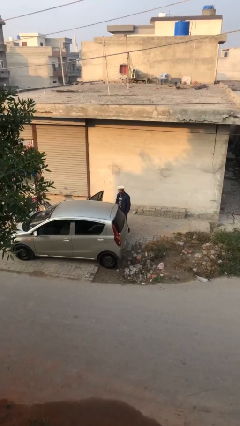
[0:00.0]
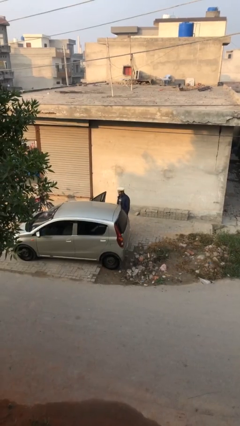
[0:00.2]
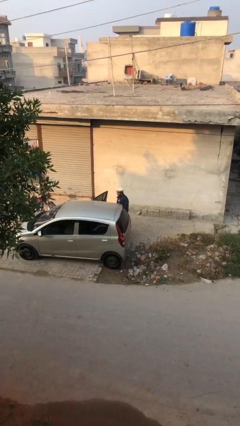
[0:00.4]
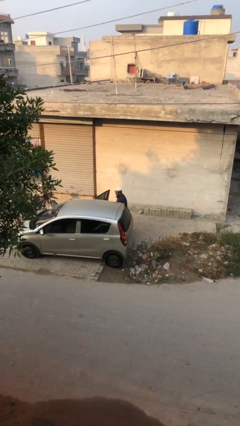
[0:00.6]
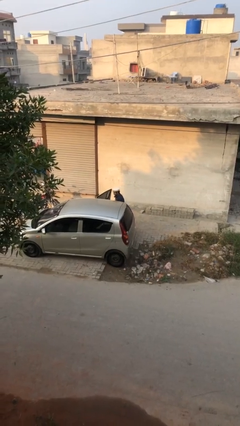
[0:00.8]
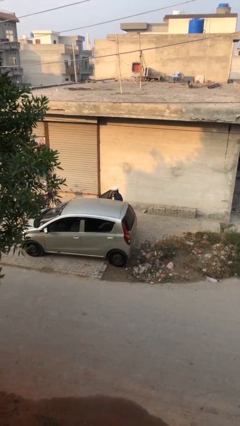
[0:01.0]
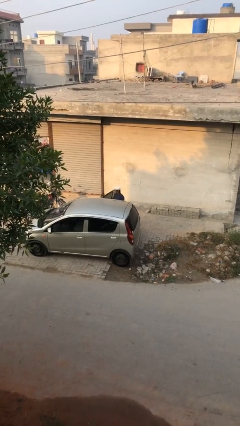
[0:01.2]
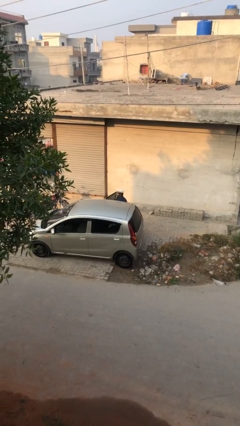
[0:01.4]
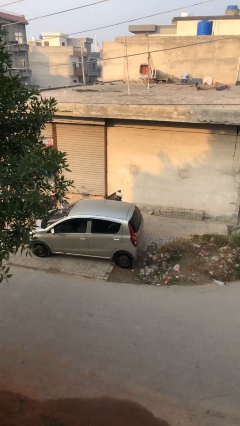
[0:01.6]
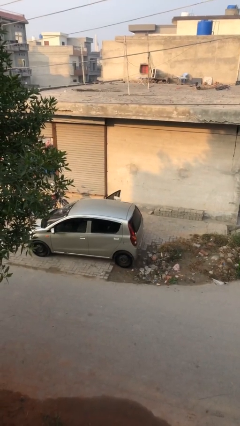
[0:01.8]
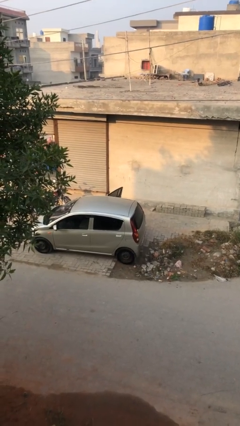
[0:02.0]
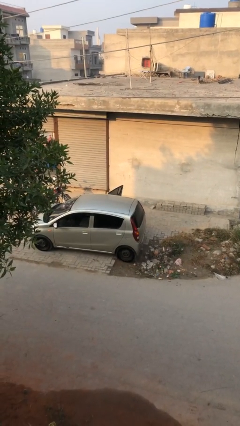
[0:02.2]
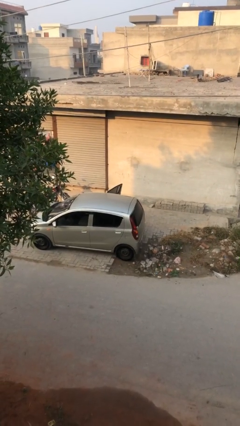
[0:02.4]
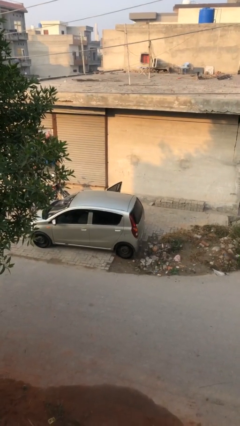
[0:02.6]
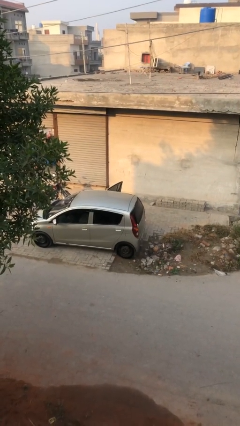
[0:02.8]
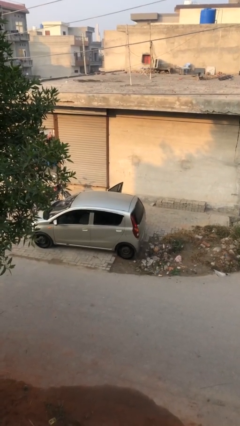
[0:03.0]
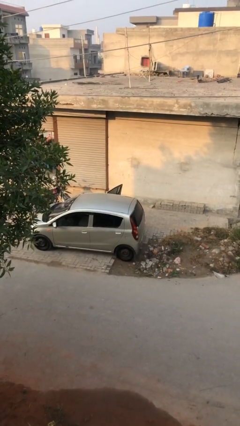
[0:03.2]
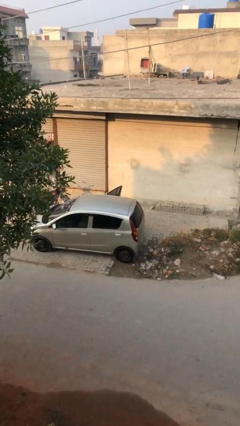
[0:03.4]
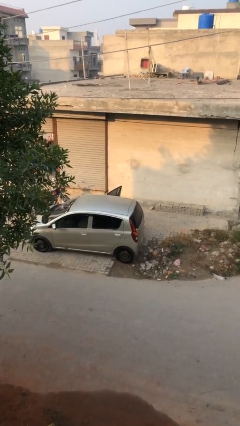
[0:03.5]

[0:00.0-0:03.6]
person enters car

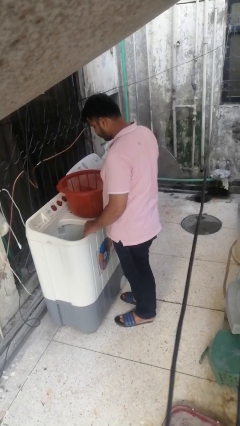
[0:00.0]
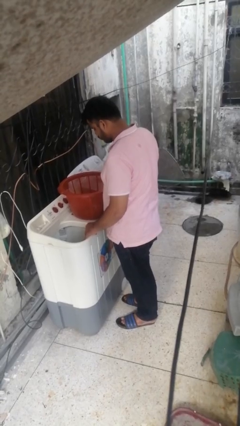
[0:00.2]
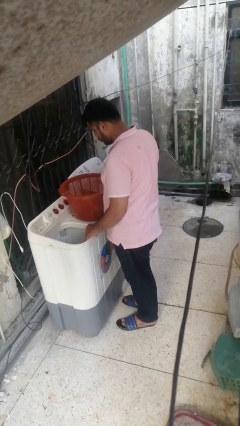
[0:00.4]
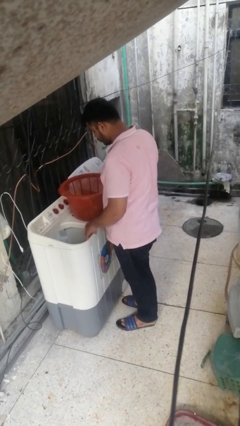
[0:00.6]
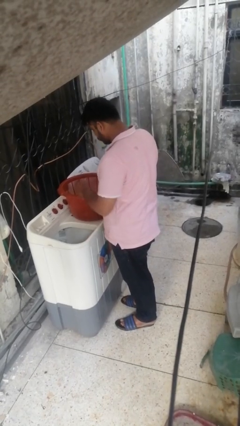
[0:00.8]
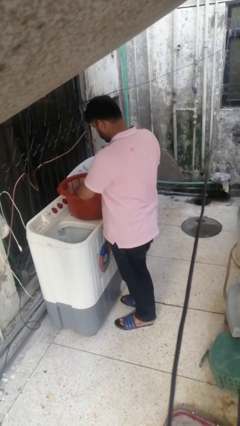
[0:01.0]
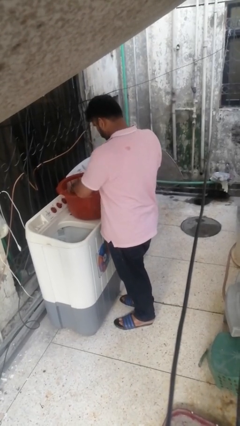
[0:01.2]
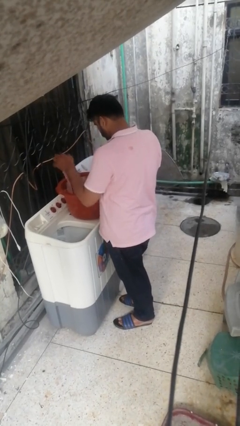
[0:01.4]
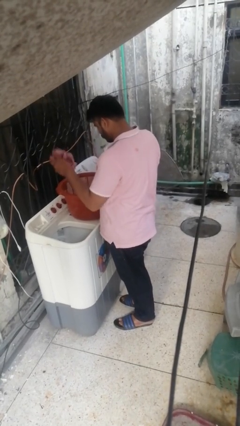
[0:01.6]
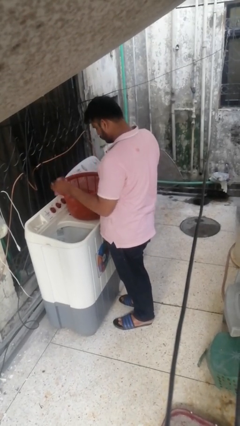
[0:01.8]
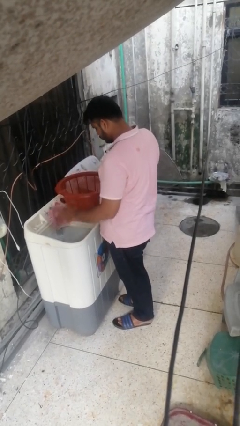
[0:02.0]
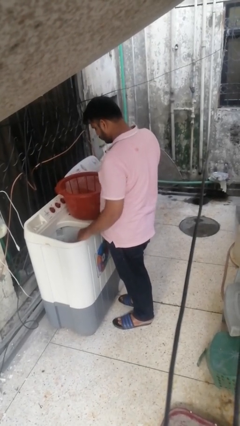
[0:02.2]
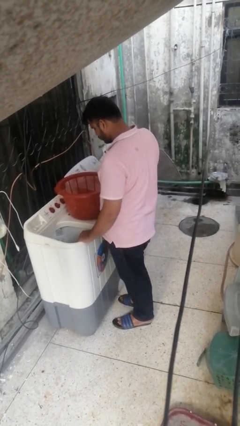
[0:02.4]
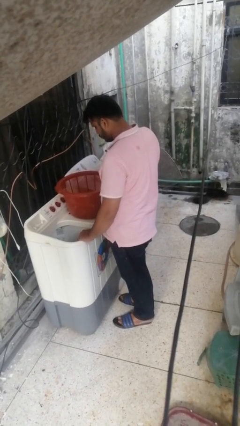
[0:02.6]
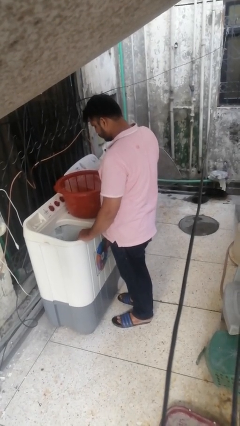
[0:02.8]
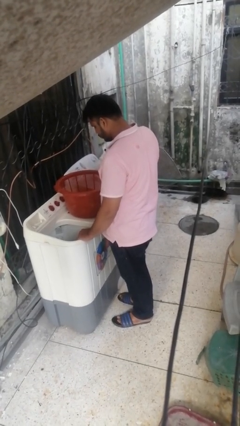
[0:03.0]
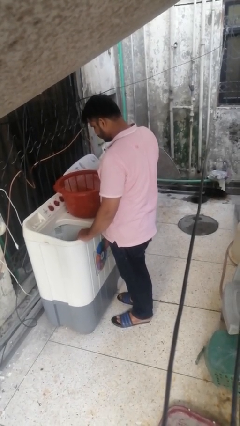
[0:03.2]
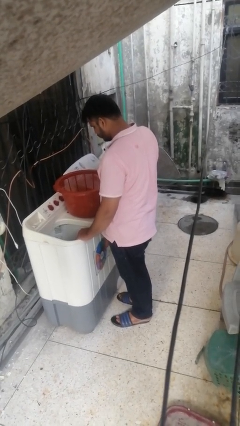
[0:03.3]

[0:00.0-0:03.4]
person loads clotheswasher

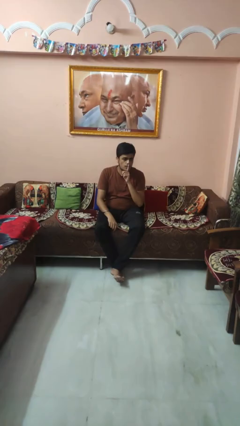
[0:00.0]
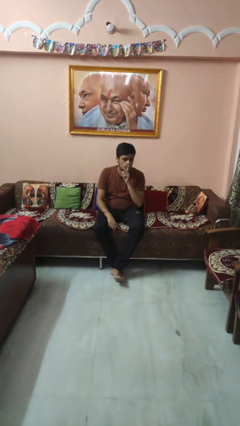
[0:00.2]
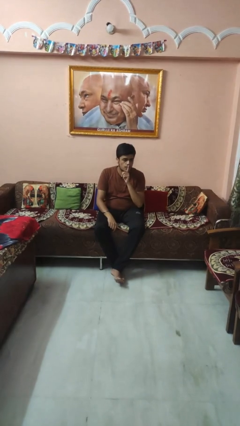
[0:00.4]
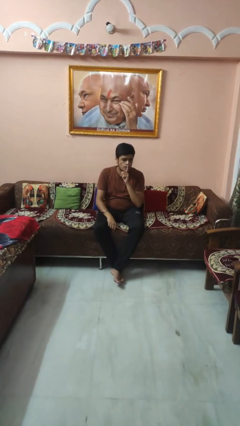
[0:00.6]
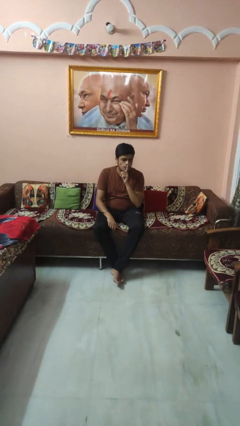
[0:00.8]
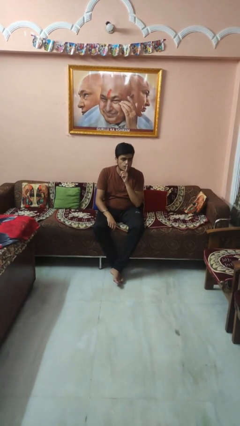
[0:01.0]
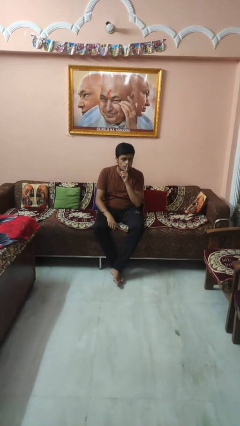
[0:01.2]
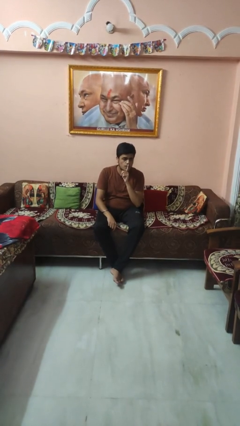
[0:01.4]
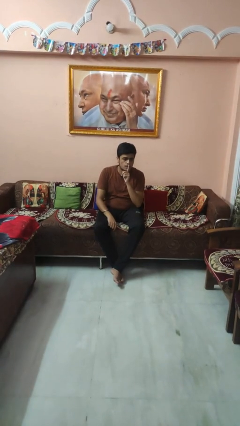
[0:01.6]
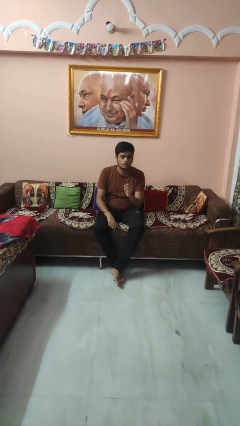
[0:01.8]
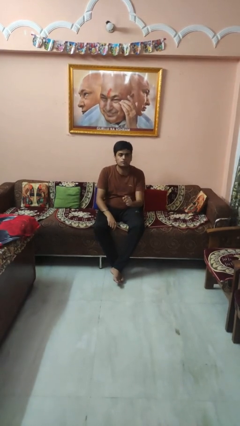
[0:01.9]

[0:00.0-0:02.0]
person gestures be quiet

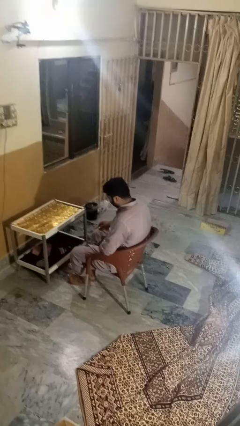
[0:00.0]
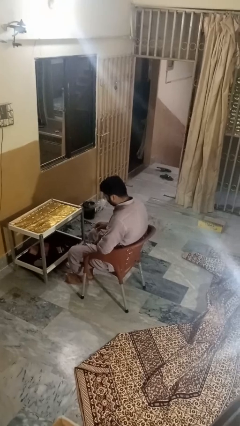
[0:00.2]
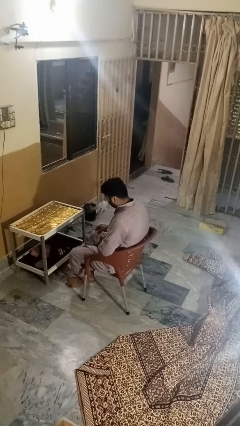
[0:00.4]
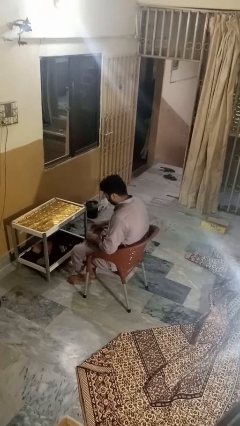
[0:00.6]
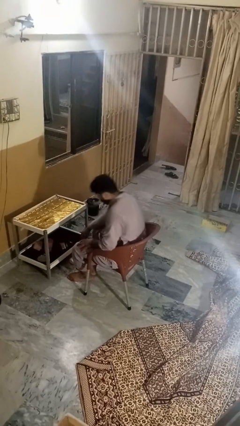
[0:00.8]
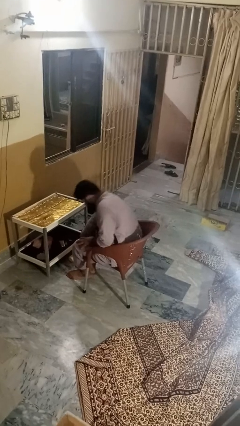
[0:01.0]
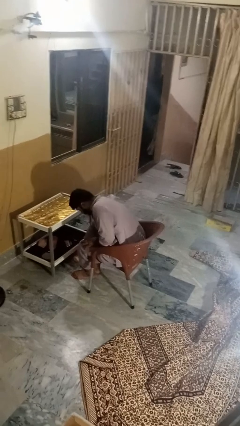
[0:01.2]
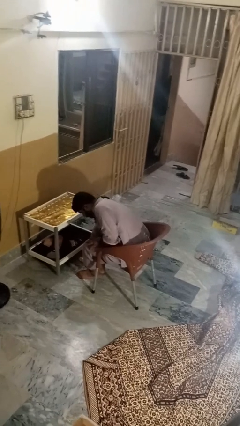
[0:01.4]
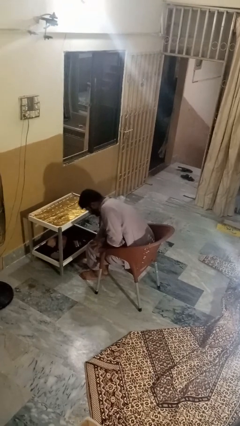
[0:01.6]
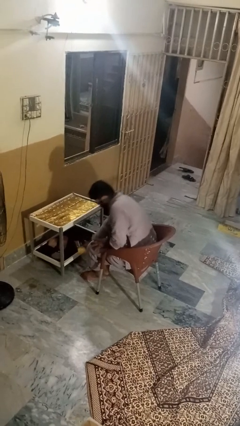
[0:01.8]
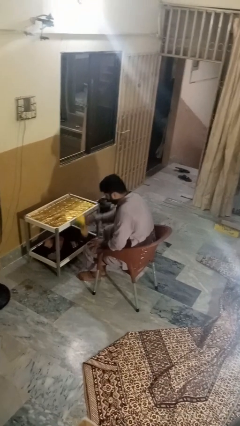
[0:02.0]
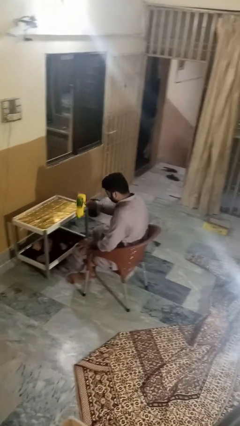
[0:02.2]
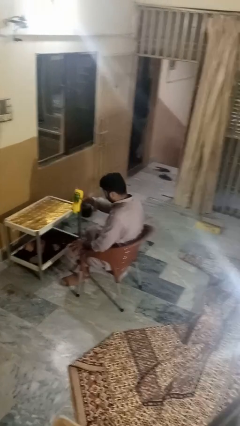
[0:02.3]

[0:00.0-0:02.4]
person picks up object from floor

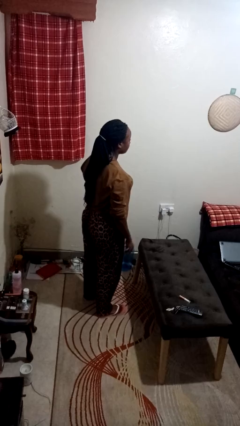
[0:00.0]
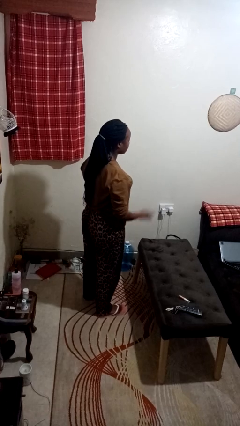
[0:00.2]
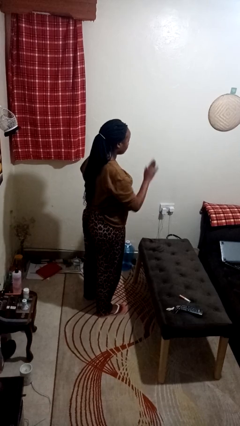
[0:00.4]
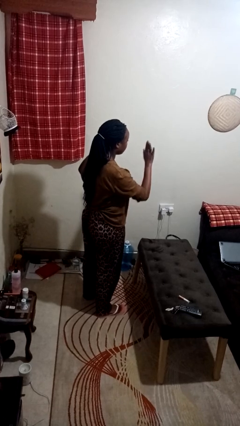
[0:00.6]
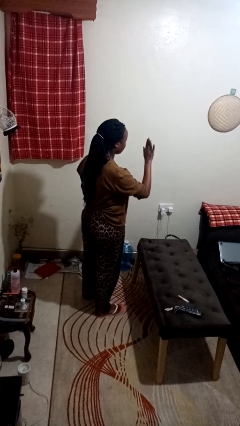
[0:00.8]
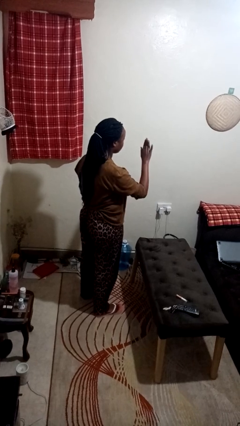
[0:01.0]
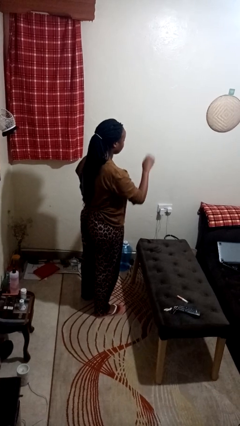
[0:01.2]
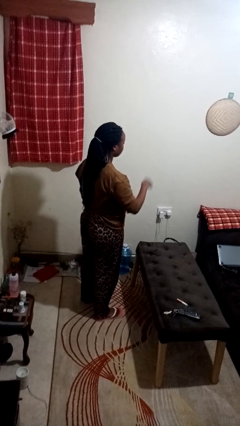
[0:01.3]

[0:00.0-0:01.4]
person gestures stop

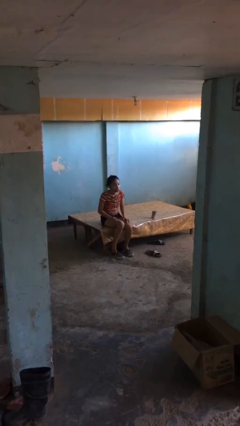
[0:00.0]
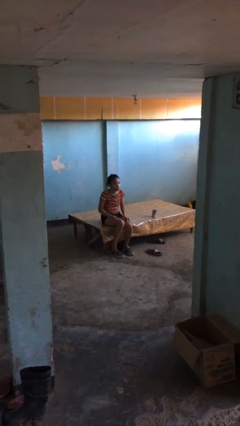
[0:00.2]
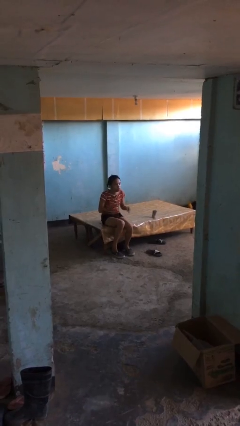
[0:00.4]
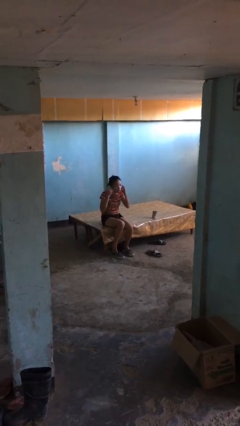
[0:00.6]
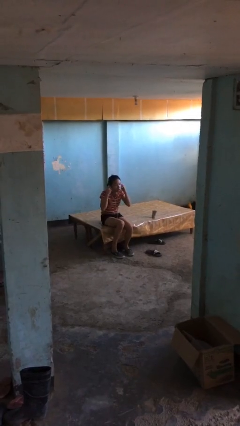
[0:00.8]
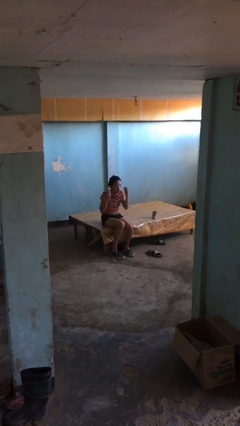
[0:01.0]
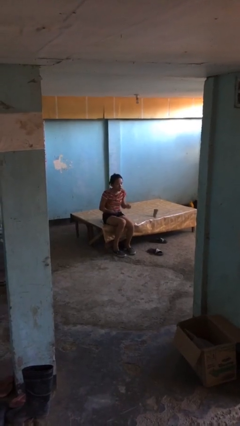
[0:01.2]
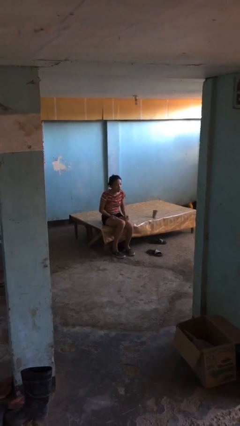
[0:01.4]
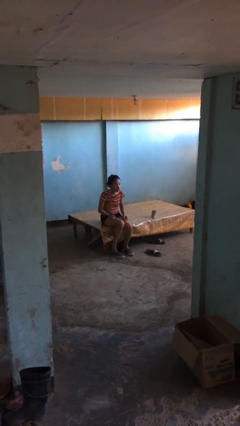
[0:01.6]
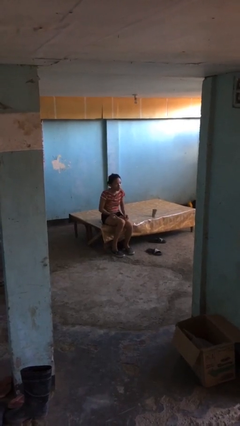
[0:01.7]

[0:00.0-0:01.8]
person takes off headphones

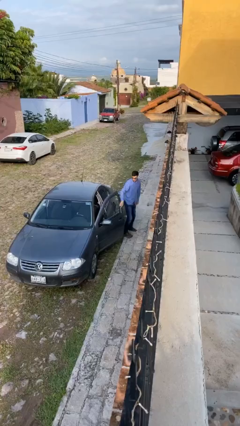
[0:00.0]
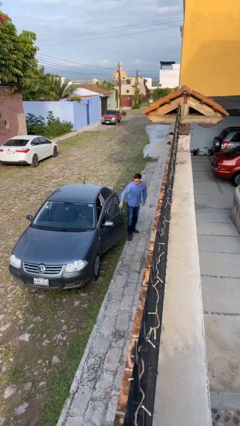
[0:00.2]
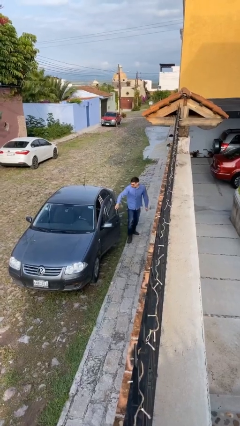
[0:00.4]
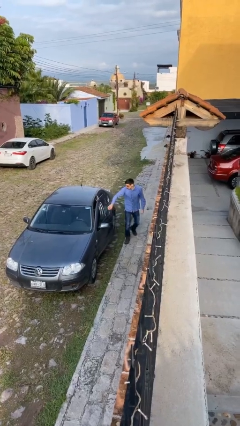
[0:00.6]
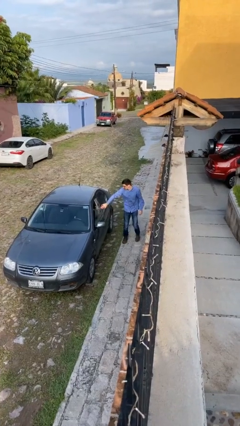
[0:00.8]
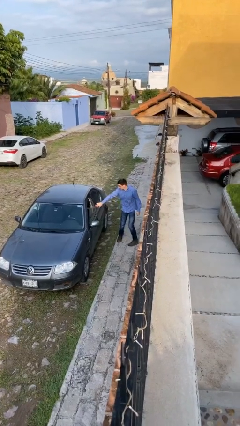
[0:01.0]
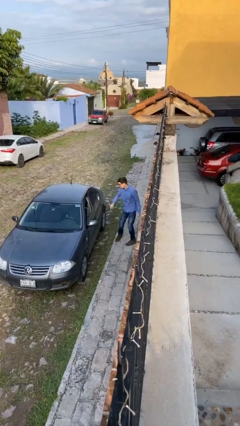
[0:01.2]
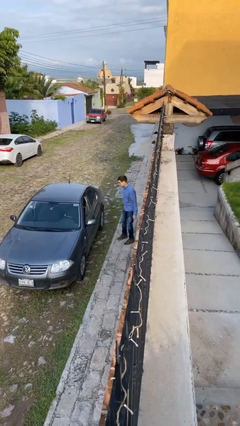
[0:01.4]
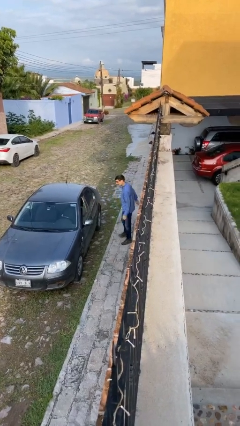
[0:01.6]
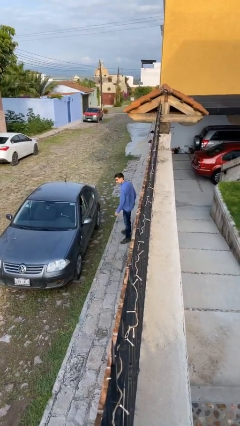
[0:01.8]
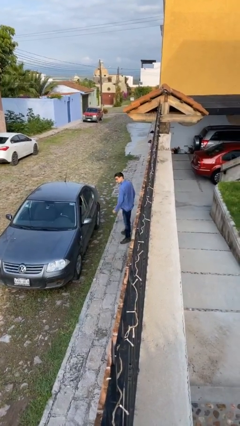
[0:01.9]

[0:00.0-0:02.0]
person closes car door

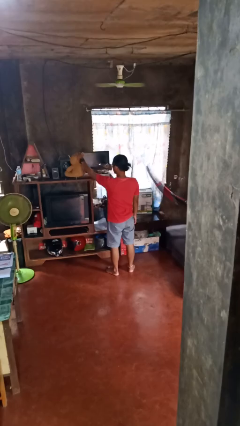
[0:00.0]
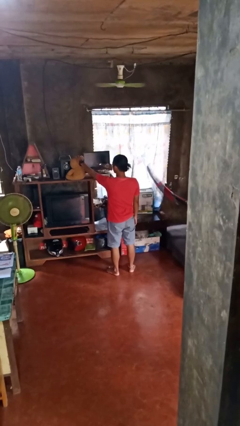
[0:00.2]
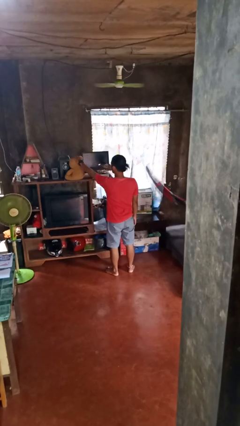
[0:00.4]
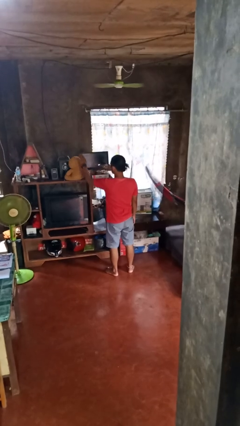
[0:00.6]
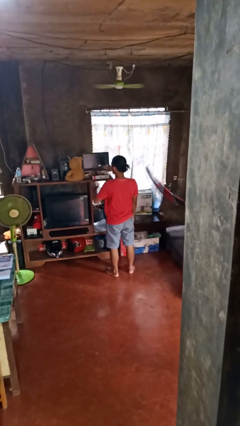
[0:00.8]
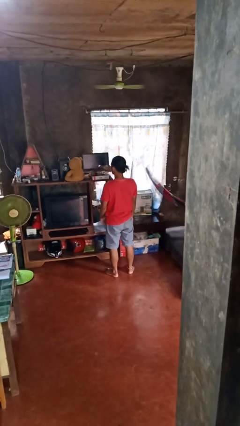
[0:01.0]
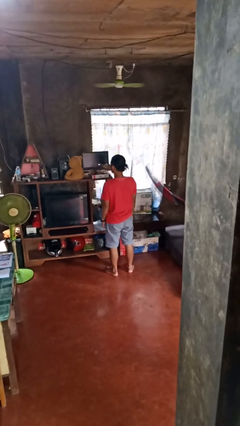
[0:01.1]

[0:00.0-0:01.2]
person puts down object on shelf
